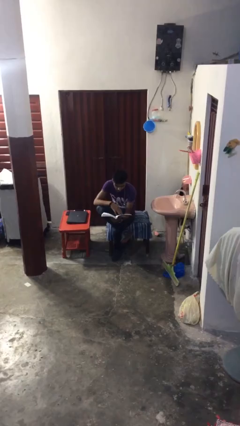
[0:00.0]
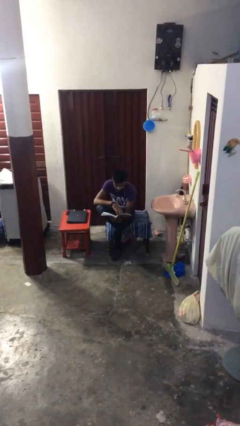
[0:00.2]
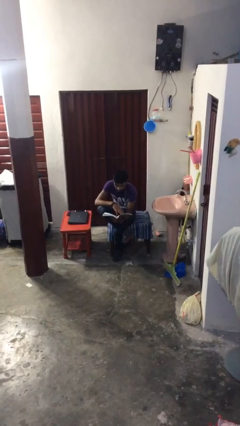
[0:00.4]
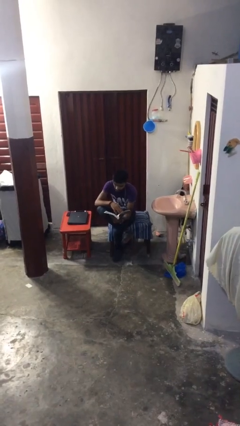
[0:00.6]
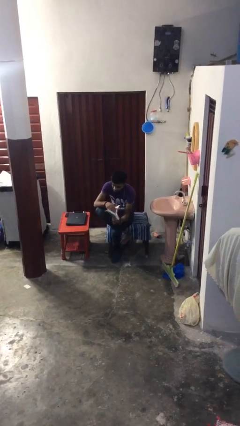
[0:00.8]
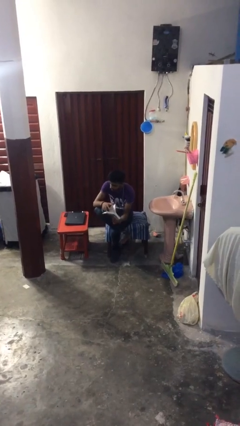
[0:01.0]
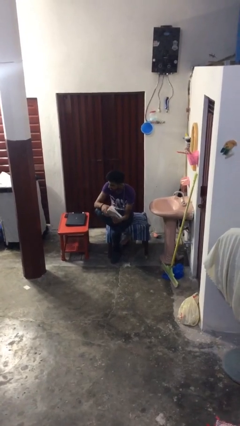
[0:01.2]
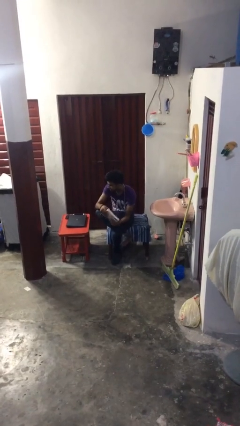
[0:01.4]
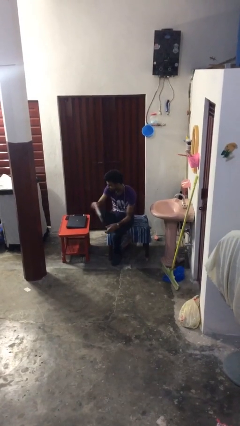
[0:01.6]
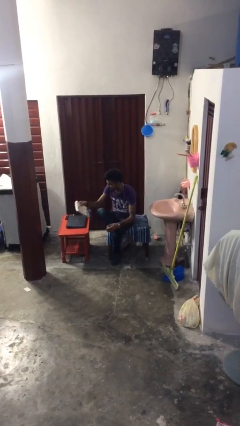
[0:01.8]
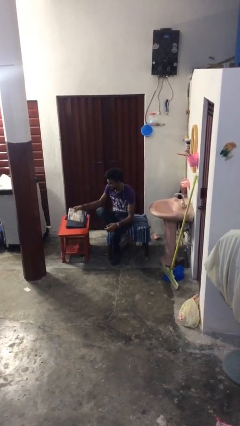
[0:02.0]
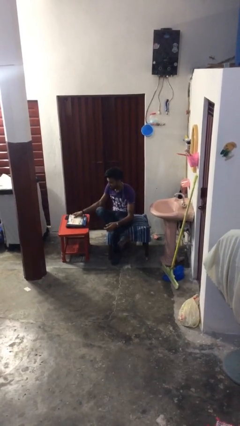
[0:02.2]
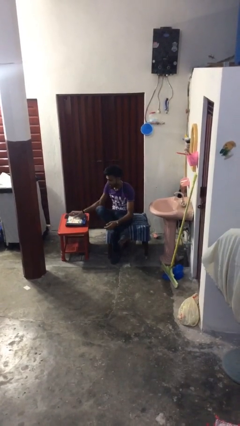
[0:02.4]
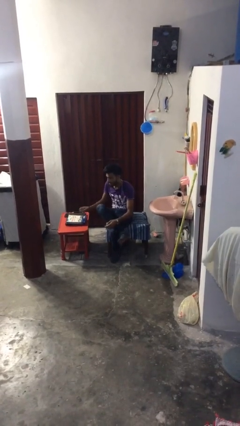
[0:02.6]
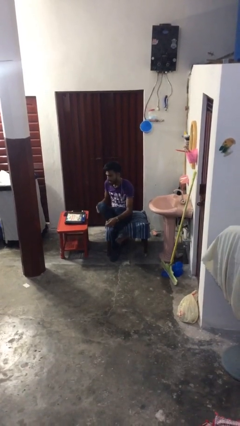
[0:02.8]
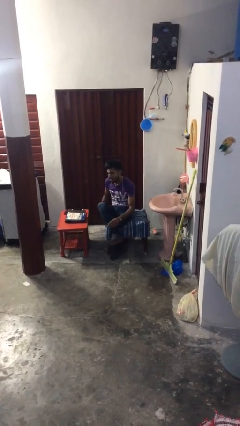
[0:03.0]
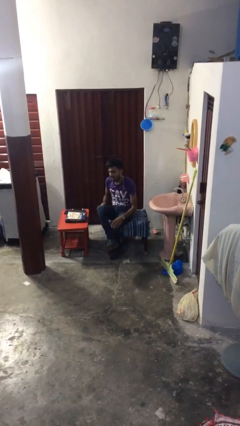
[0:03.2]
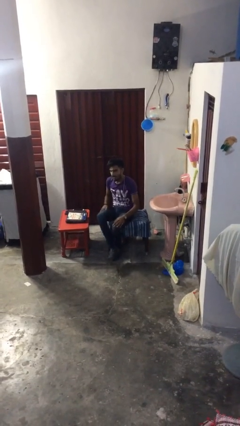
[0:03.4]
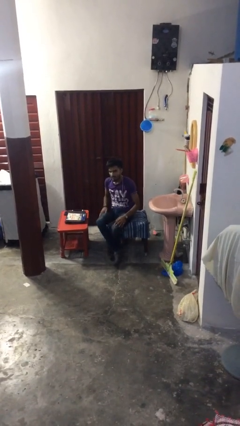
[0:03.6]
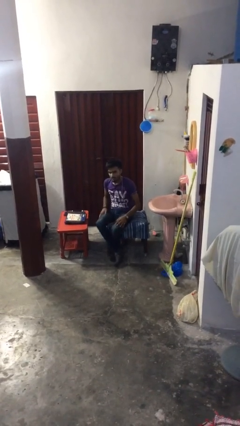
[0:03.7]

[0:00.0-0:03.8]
person puts down object on table

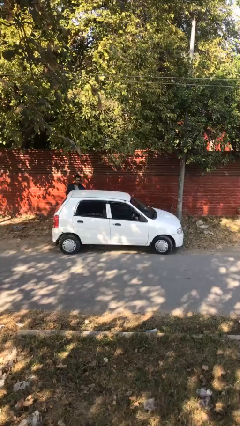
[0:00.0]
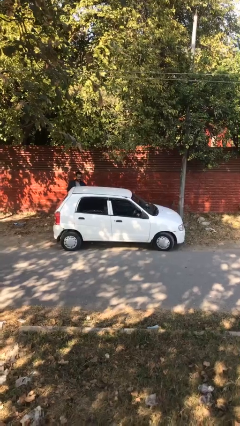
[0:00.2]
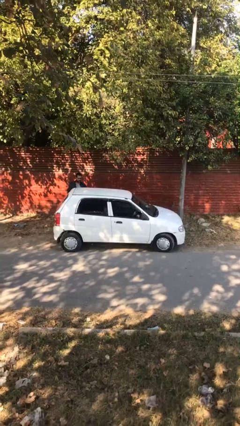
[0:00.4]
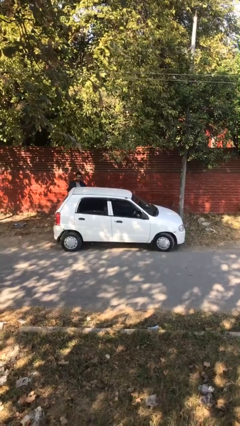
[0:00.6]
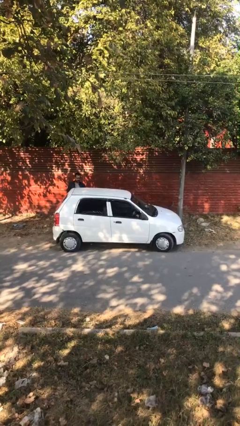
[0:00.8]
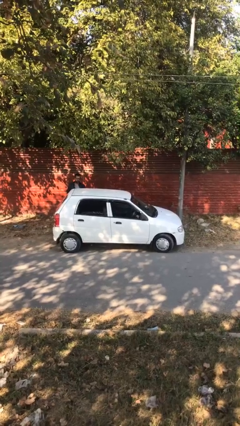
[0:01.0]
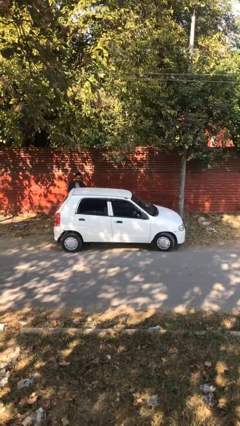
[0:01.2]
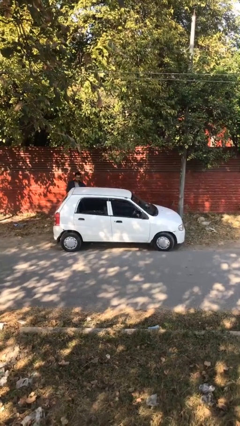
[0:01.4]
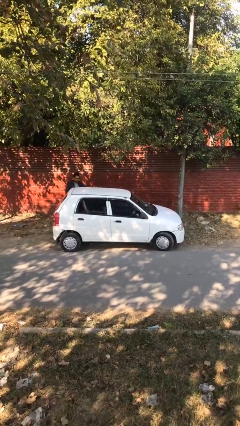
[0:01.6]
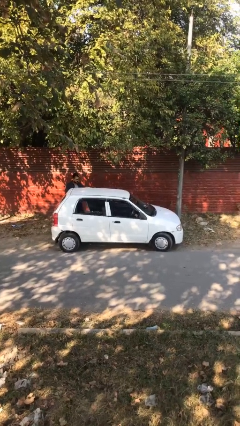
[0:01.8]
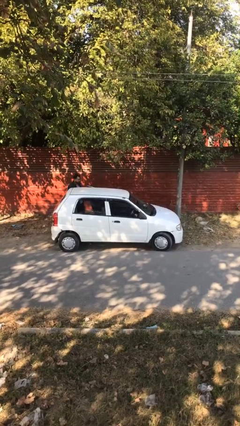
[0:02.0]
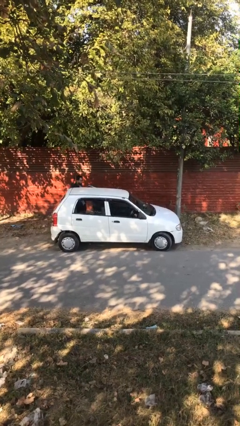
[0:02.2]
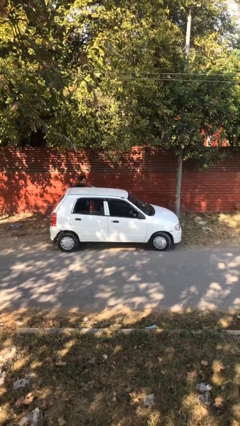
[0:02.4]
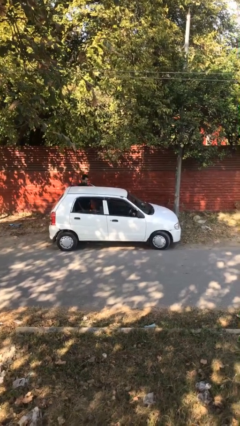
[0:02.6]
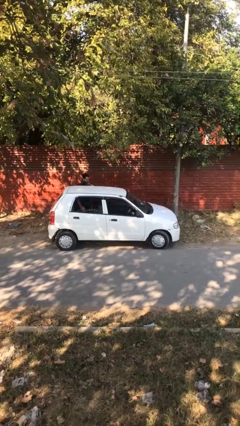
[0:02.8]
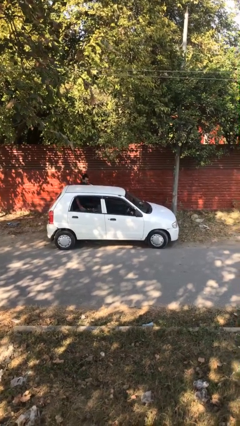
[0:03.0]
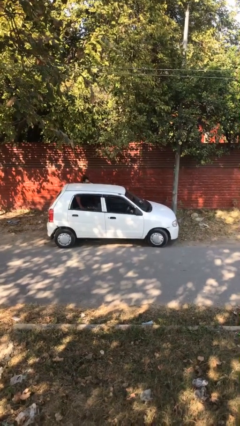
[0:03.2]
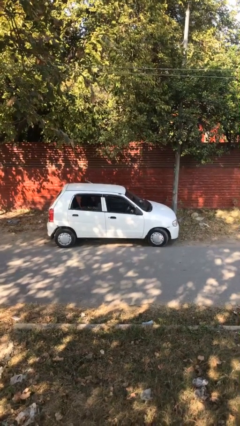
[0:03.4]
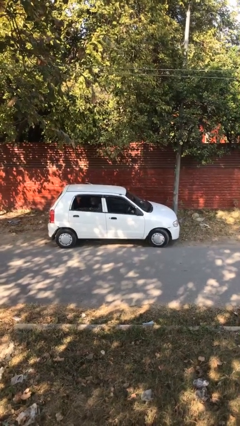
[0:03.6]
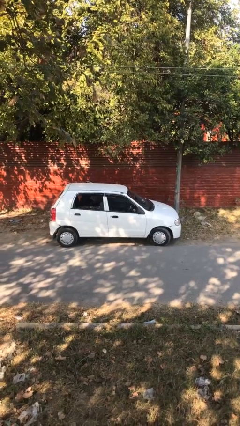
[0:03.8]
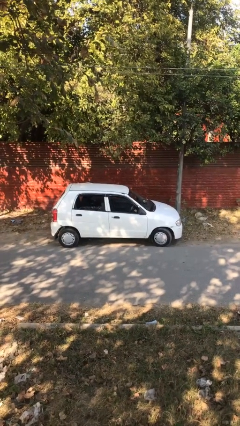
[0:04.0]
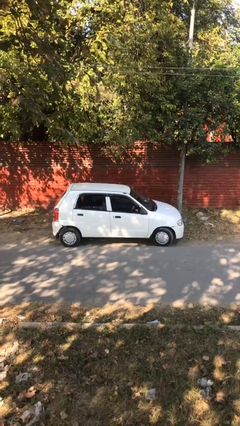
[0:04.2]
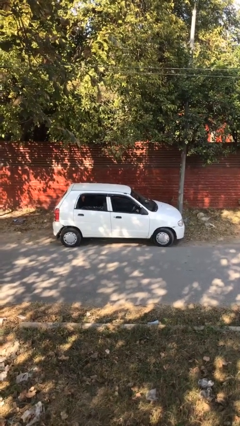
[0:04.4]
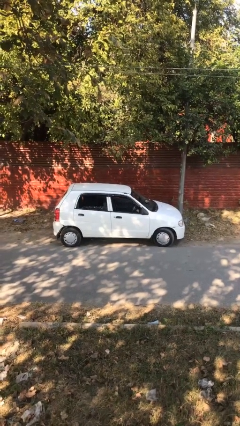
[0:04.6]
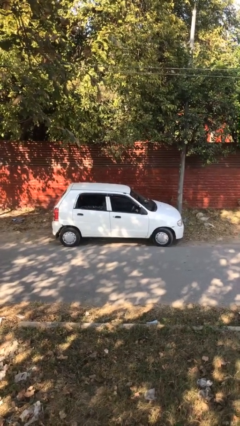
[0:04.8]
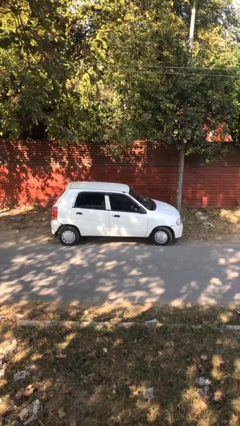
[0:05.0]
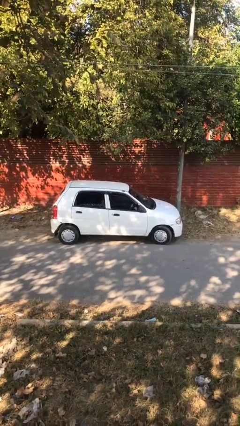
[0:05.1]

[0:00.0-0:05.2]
car picks up person

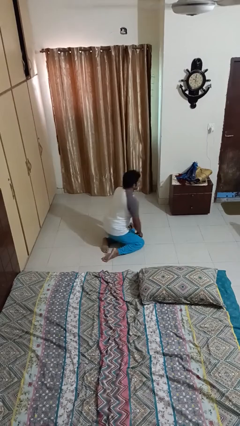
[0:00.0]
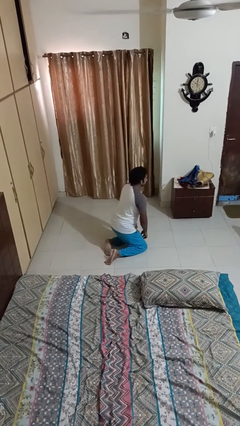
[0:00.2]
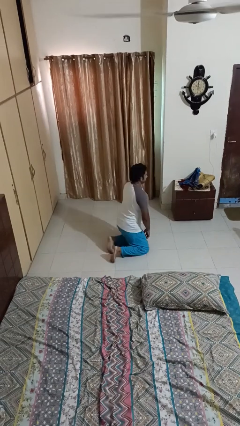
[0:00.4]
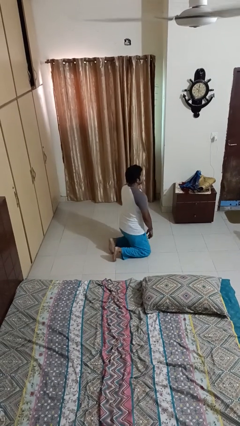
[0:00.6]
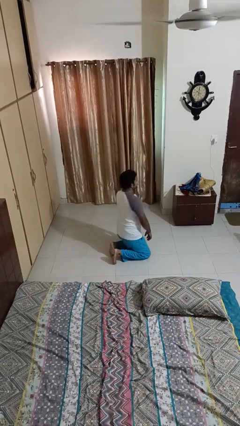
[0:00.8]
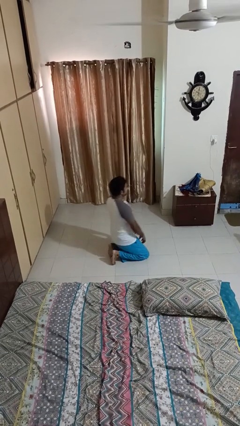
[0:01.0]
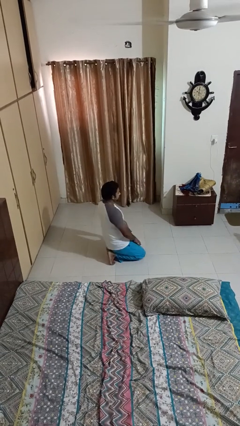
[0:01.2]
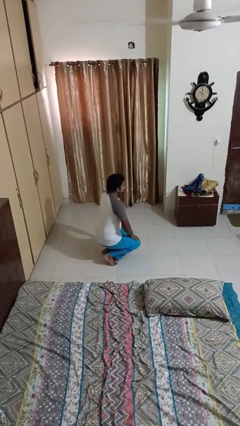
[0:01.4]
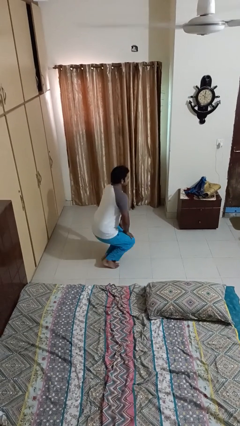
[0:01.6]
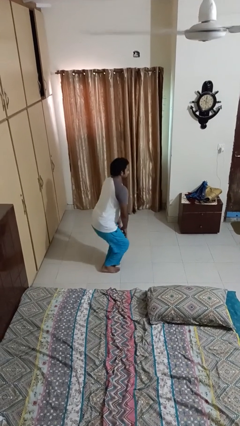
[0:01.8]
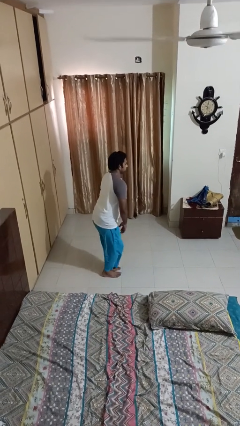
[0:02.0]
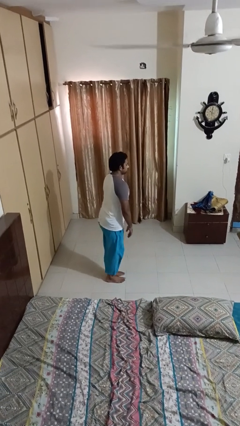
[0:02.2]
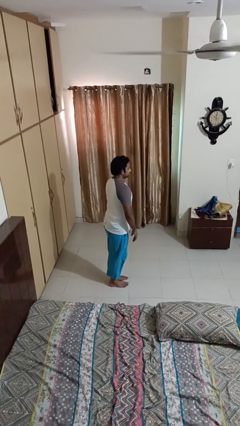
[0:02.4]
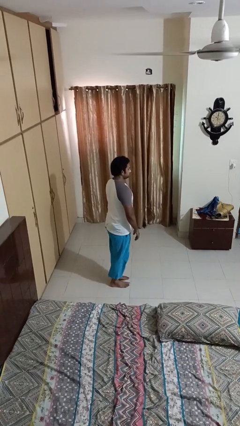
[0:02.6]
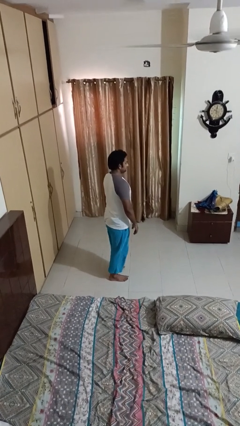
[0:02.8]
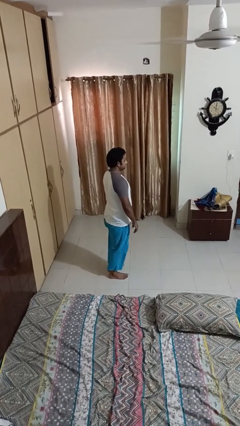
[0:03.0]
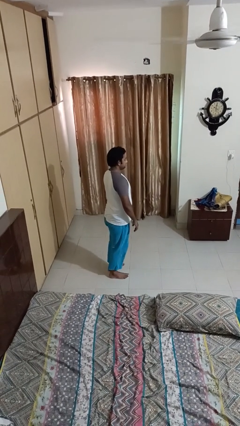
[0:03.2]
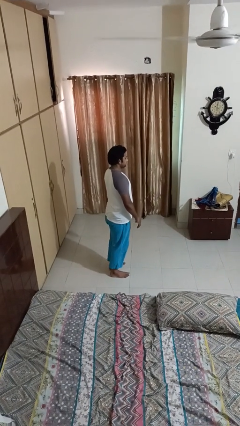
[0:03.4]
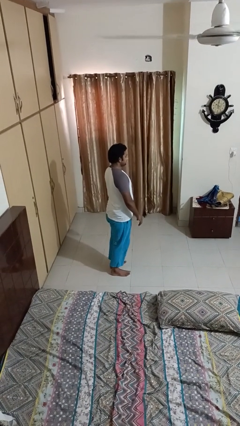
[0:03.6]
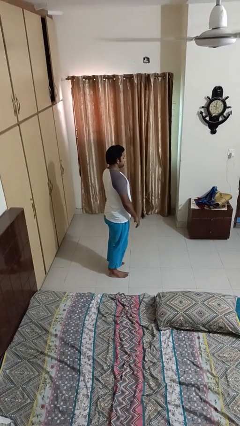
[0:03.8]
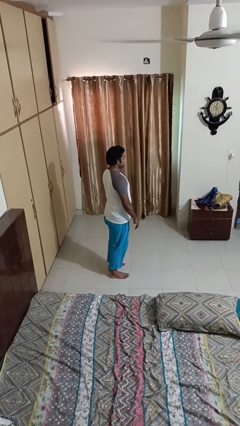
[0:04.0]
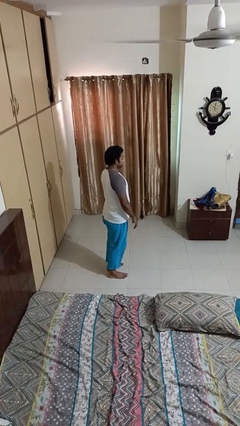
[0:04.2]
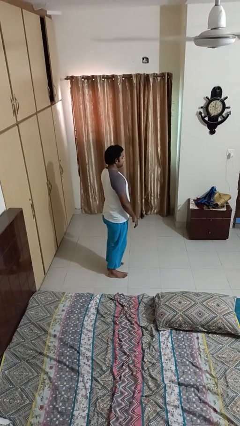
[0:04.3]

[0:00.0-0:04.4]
person stands up from floor

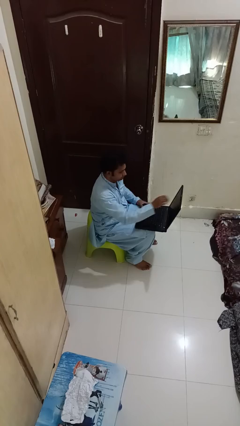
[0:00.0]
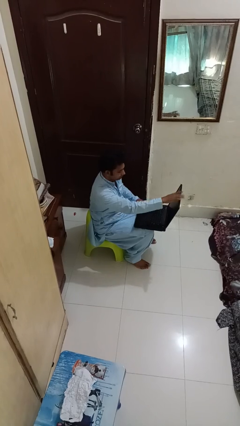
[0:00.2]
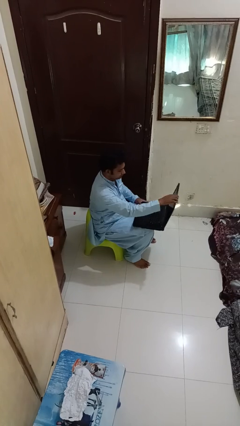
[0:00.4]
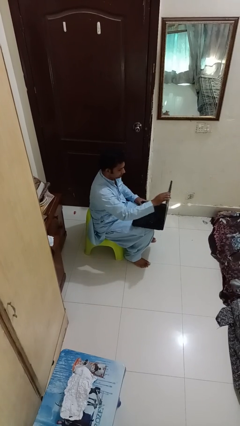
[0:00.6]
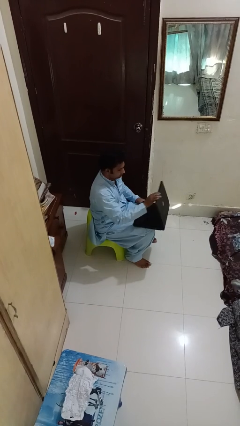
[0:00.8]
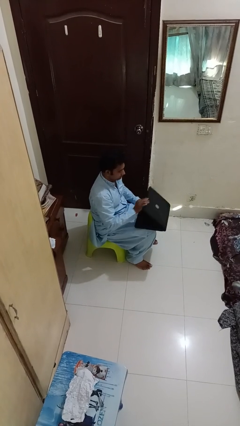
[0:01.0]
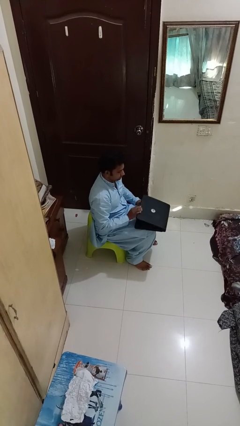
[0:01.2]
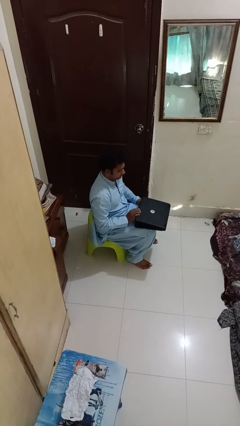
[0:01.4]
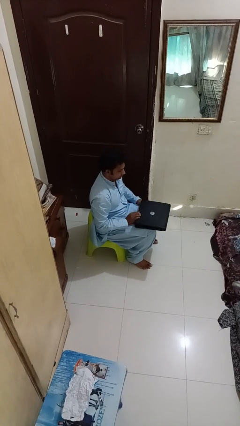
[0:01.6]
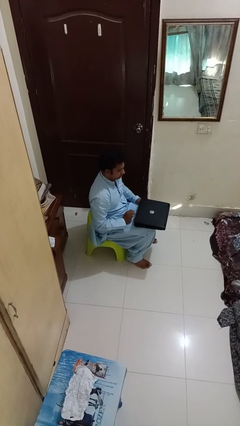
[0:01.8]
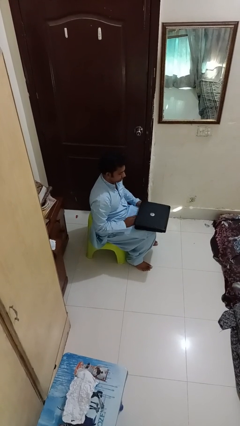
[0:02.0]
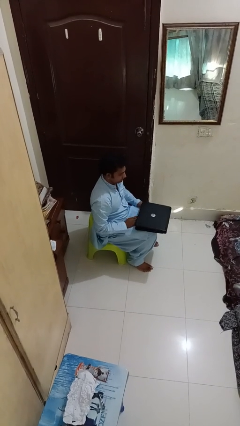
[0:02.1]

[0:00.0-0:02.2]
person closes laptop

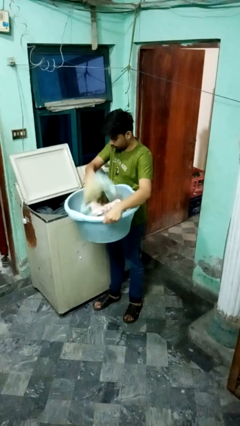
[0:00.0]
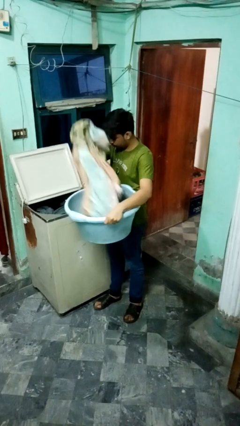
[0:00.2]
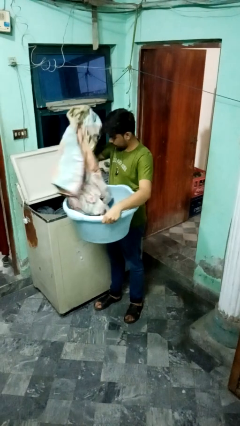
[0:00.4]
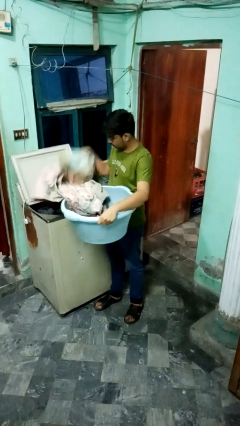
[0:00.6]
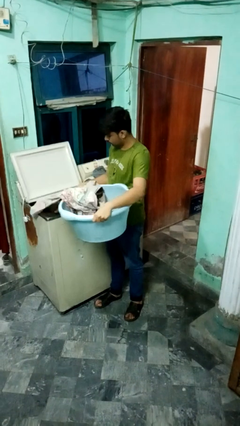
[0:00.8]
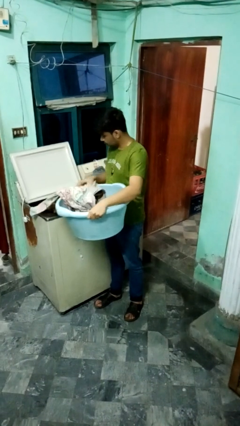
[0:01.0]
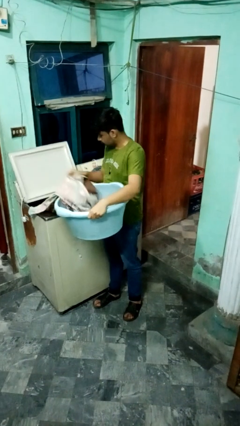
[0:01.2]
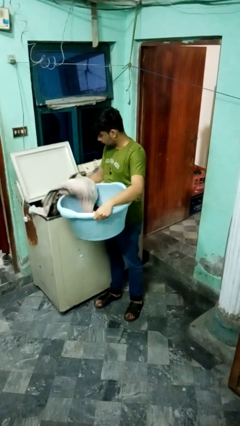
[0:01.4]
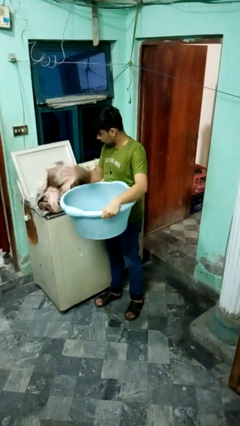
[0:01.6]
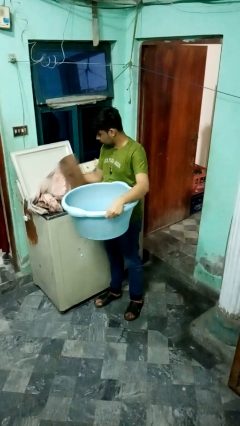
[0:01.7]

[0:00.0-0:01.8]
person loads clotheswasher
